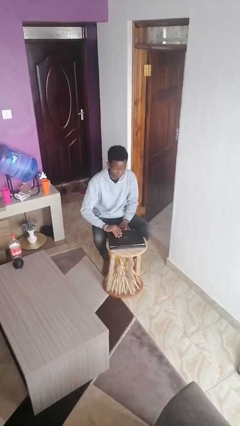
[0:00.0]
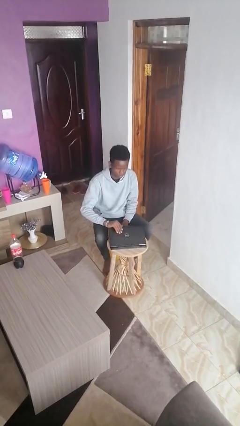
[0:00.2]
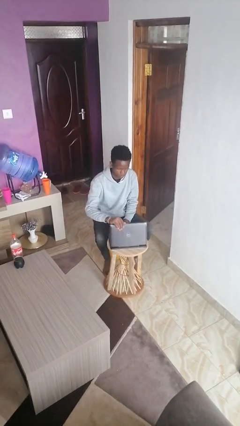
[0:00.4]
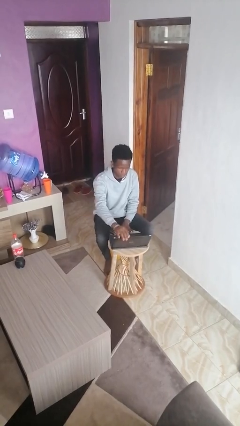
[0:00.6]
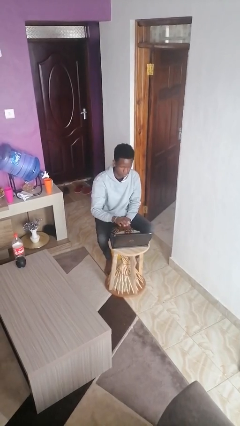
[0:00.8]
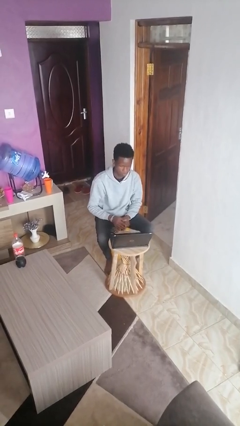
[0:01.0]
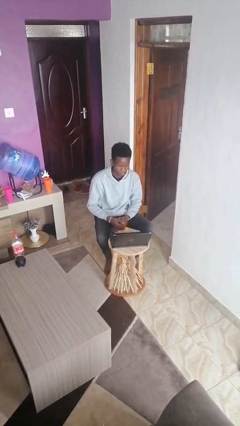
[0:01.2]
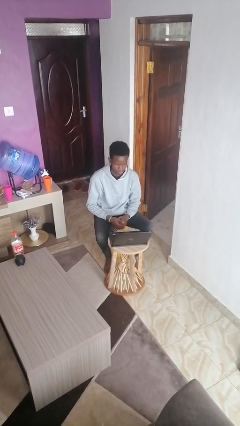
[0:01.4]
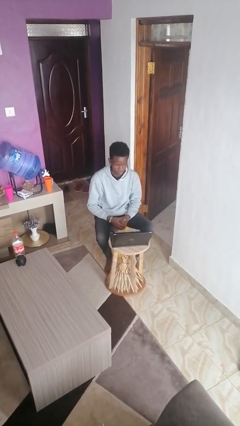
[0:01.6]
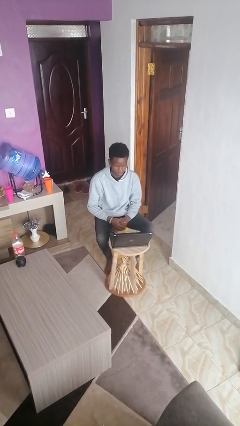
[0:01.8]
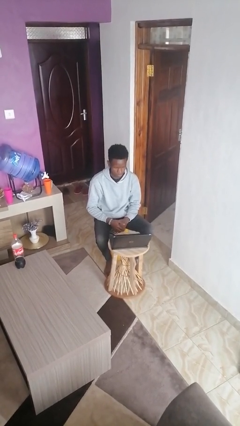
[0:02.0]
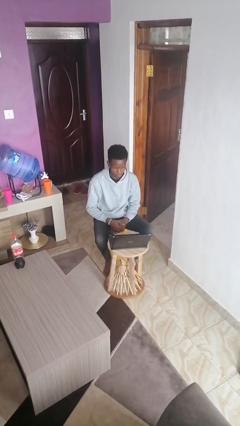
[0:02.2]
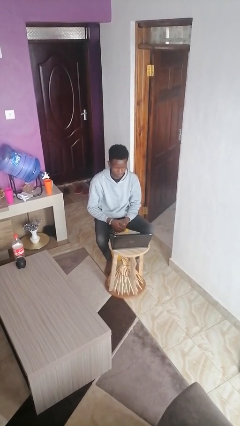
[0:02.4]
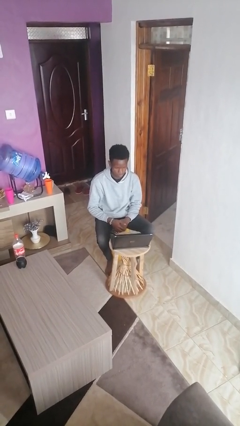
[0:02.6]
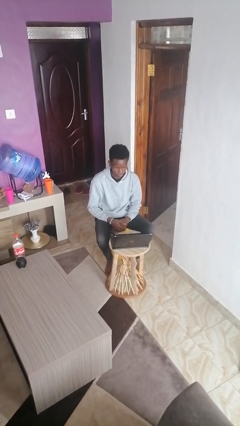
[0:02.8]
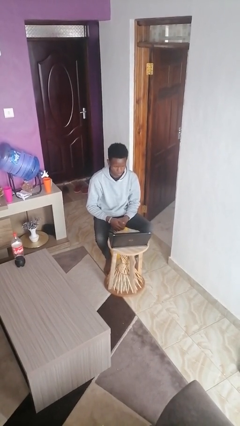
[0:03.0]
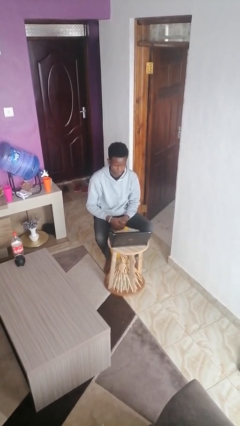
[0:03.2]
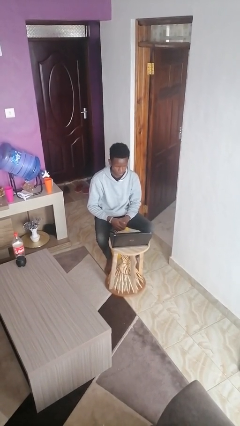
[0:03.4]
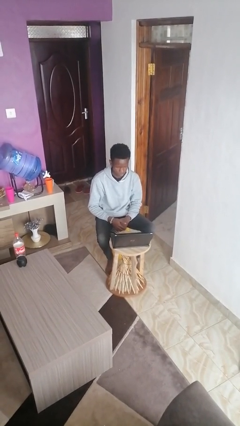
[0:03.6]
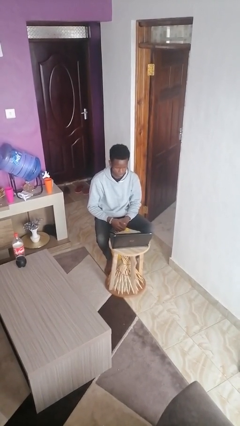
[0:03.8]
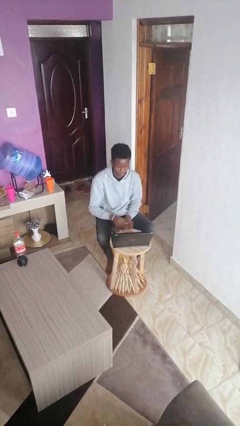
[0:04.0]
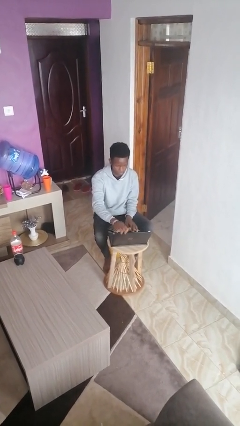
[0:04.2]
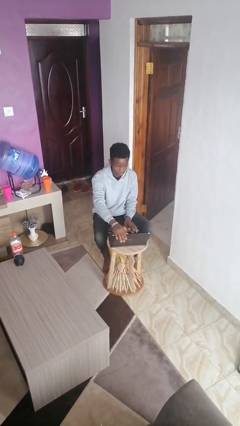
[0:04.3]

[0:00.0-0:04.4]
person opens laptop

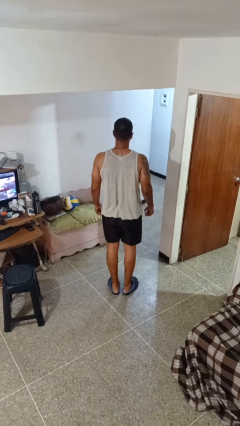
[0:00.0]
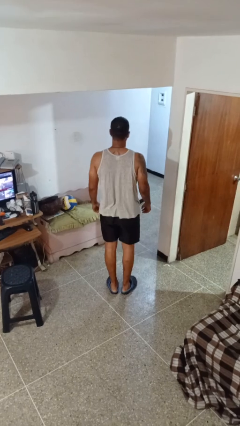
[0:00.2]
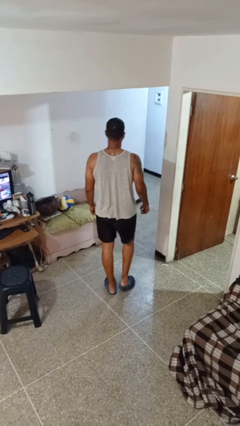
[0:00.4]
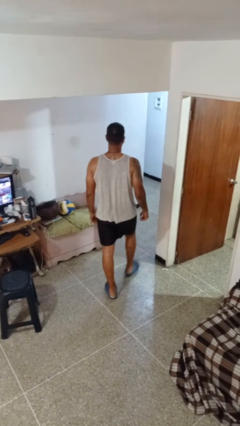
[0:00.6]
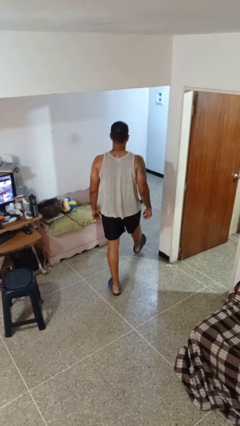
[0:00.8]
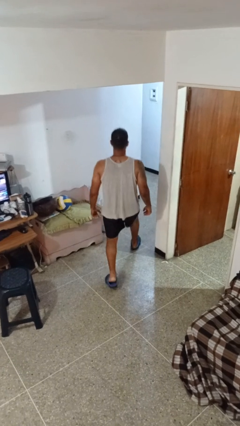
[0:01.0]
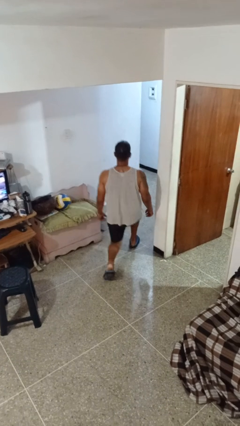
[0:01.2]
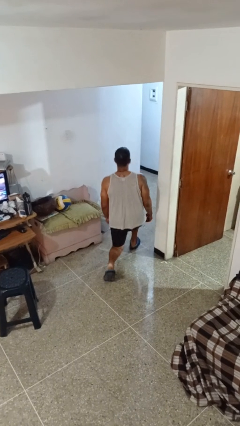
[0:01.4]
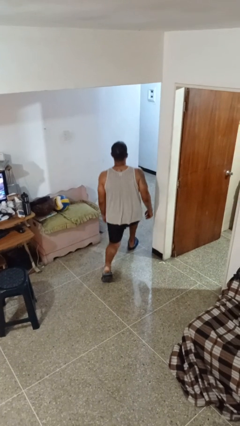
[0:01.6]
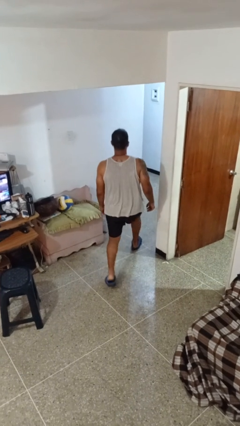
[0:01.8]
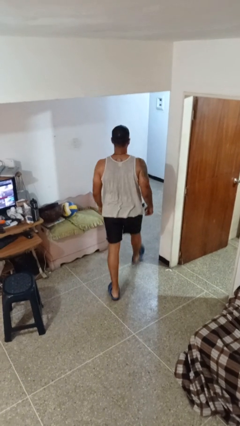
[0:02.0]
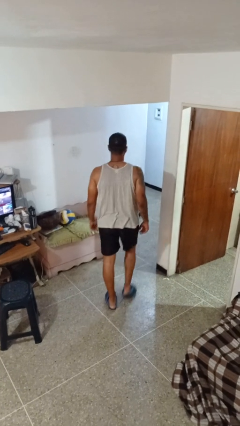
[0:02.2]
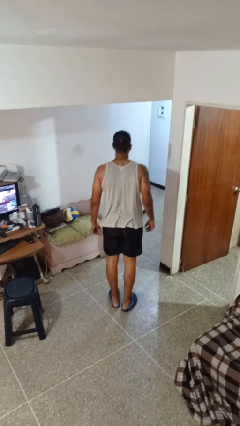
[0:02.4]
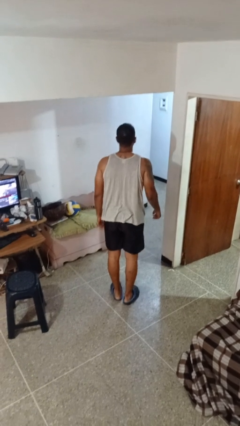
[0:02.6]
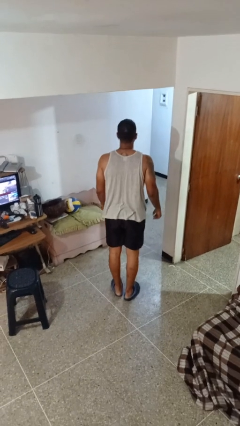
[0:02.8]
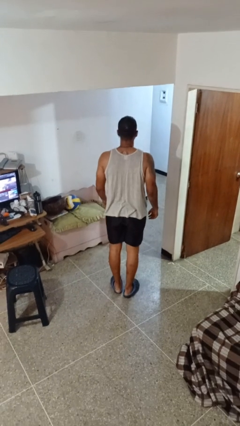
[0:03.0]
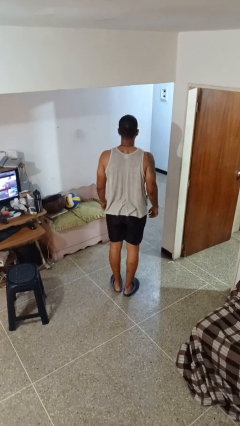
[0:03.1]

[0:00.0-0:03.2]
person exercises with lunges

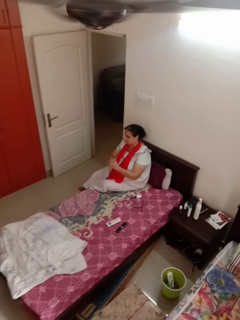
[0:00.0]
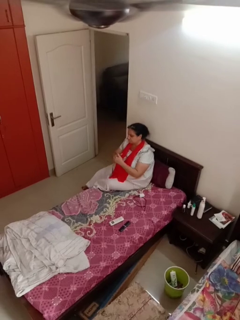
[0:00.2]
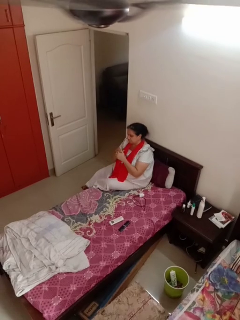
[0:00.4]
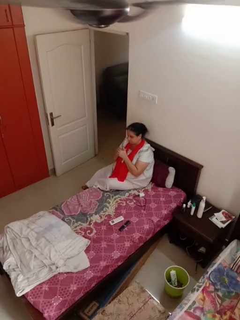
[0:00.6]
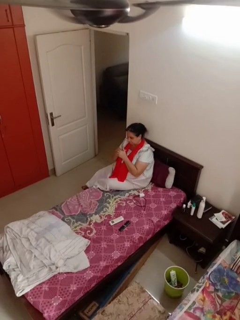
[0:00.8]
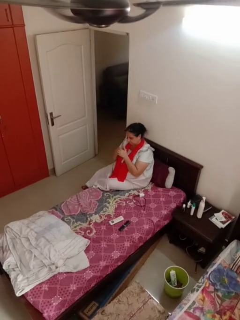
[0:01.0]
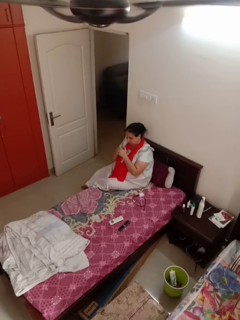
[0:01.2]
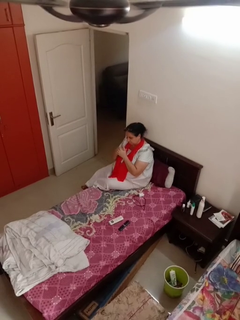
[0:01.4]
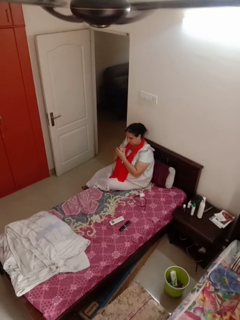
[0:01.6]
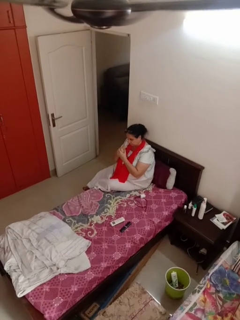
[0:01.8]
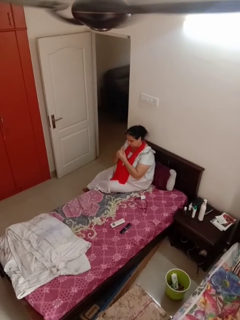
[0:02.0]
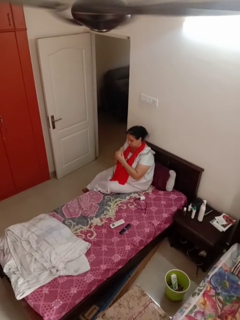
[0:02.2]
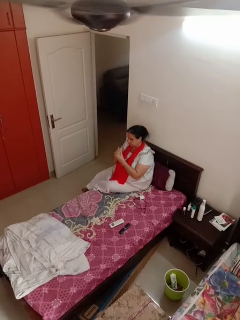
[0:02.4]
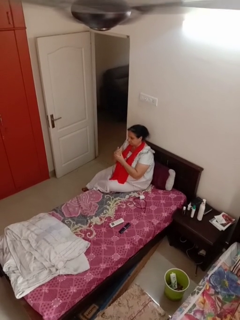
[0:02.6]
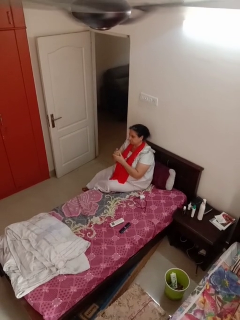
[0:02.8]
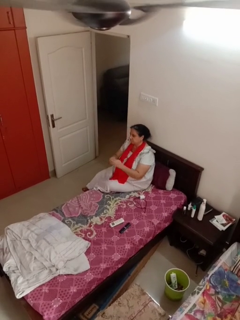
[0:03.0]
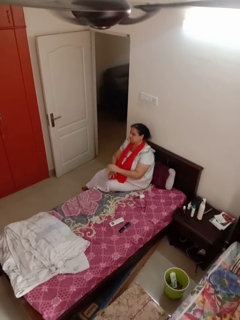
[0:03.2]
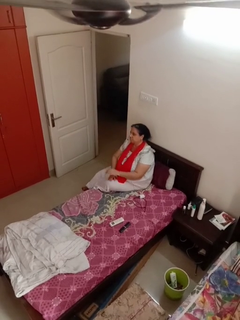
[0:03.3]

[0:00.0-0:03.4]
person cracks knuckles

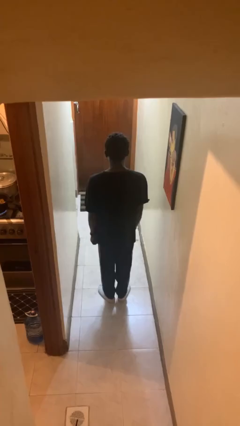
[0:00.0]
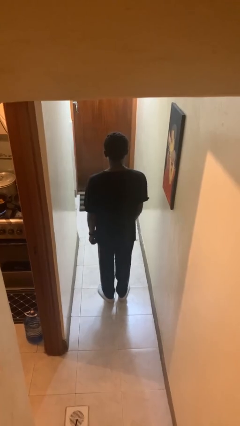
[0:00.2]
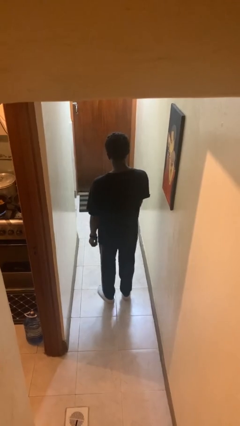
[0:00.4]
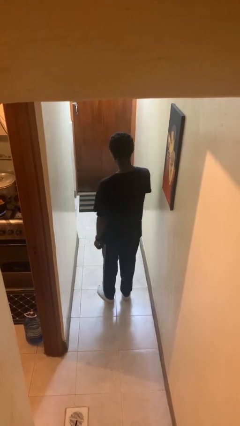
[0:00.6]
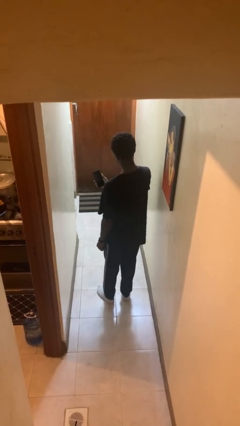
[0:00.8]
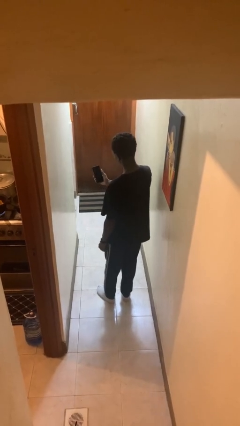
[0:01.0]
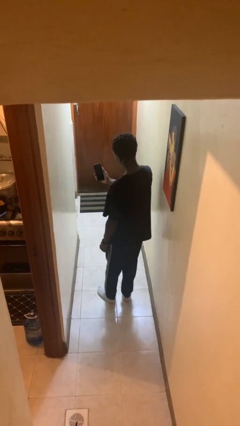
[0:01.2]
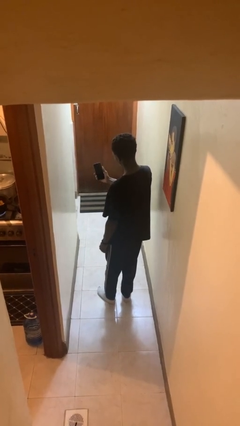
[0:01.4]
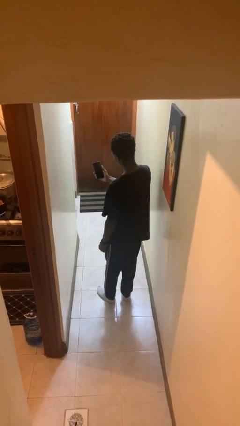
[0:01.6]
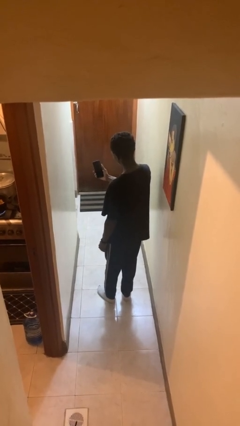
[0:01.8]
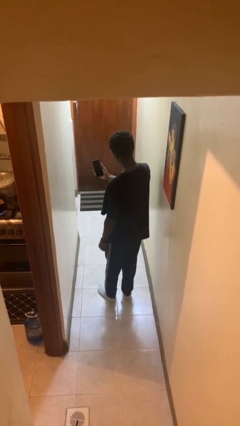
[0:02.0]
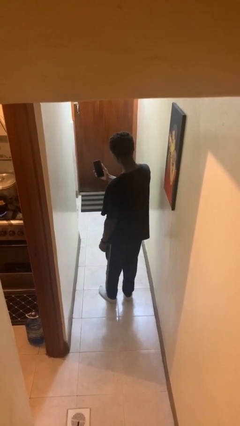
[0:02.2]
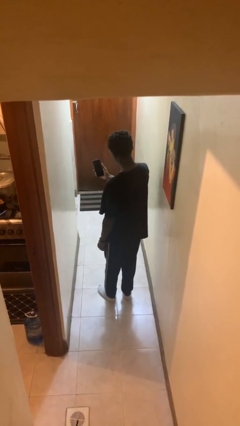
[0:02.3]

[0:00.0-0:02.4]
person takes selfie

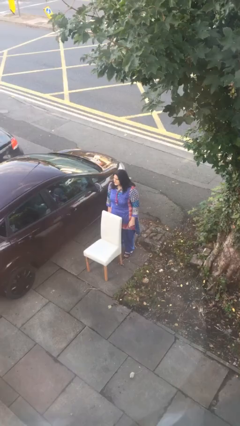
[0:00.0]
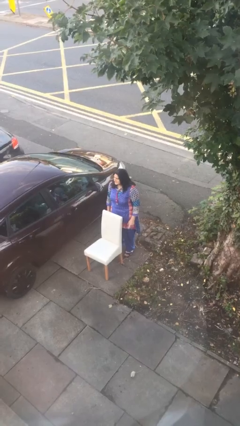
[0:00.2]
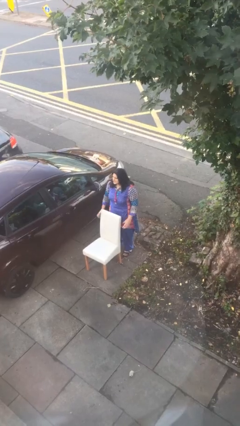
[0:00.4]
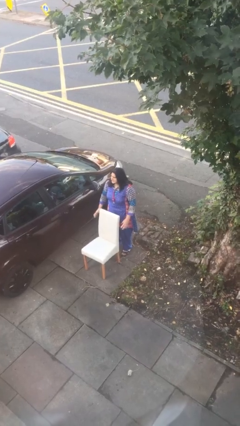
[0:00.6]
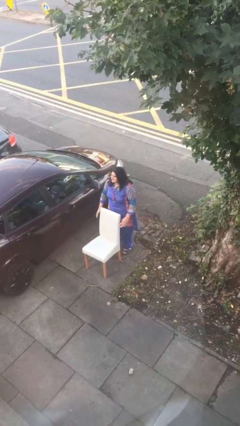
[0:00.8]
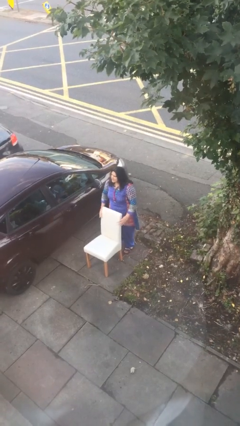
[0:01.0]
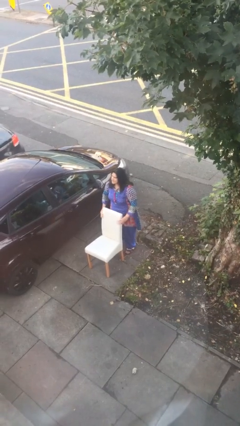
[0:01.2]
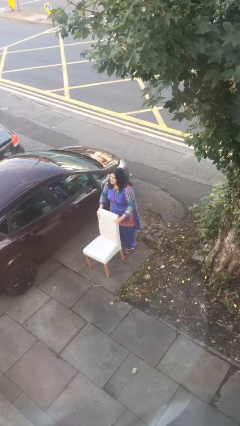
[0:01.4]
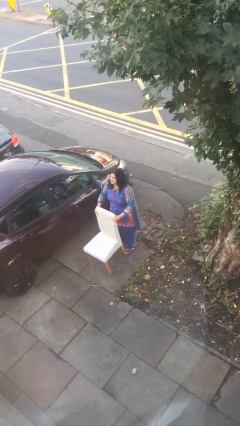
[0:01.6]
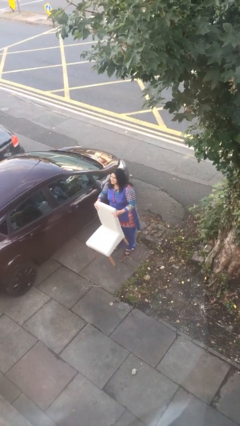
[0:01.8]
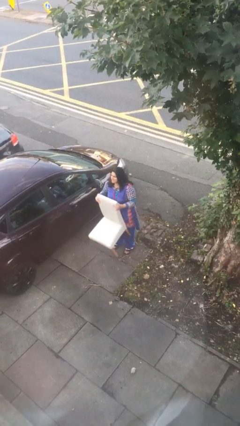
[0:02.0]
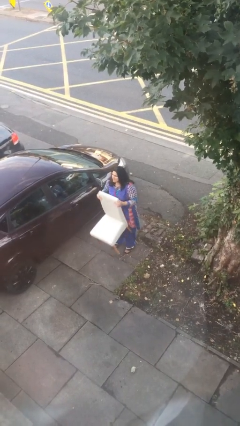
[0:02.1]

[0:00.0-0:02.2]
person picks up object from floor

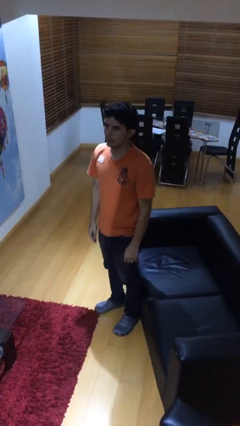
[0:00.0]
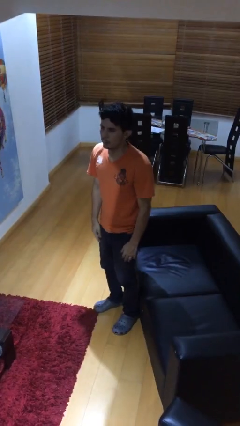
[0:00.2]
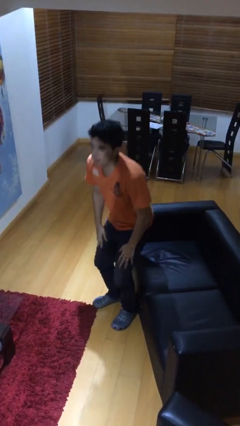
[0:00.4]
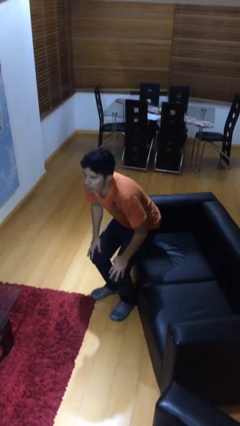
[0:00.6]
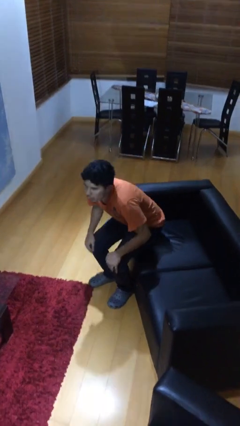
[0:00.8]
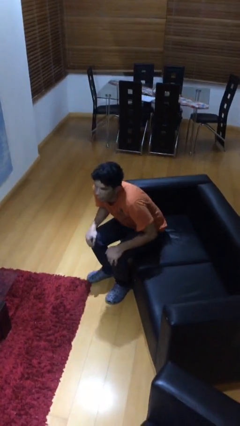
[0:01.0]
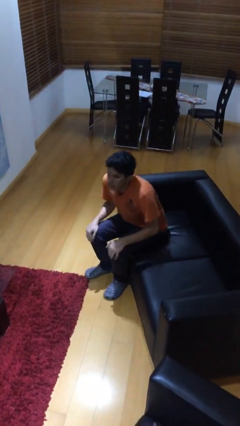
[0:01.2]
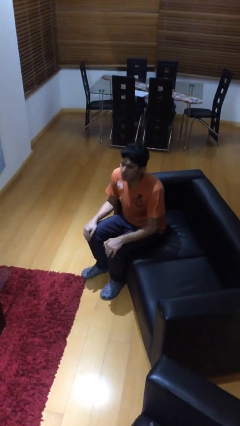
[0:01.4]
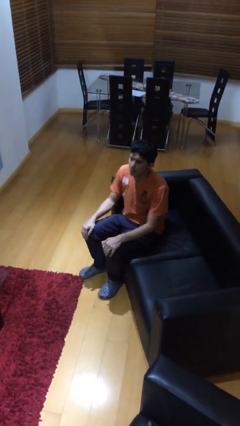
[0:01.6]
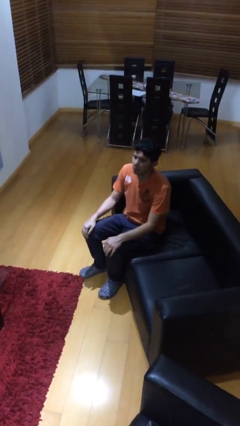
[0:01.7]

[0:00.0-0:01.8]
person sits down

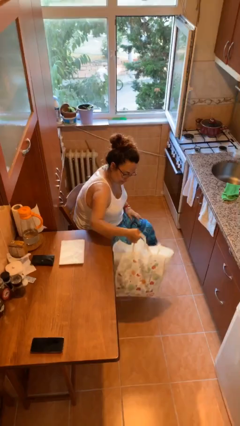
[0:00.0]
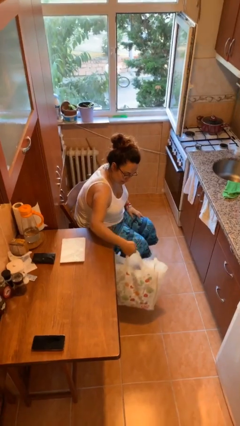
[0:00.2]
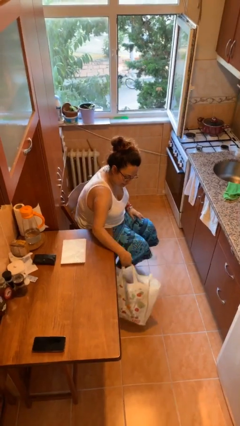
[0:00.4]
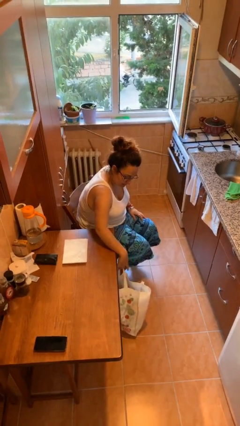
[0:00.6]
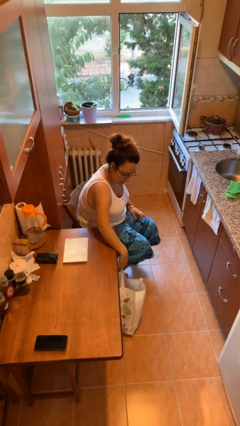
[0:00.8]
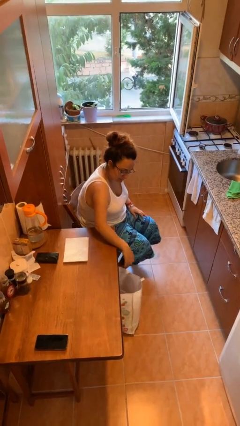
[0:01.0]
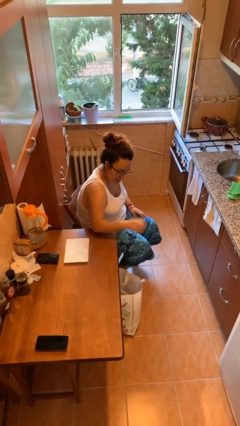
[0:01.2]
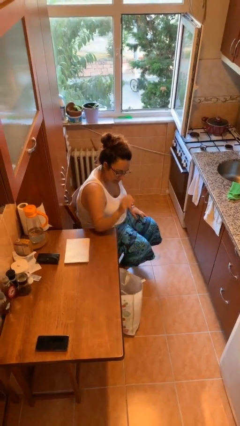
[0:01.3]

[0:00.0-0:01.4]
person puts down object on floor
